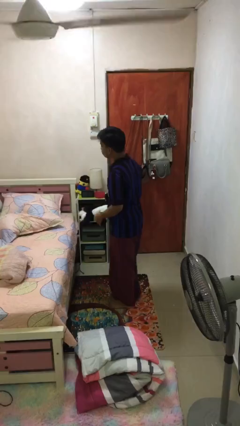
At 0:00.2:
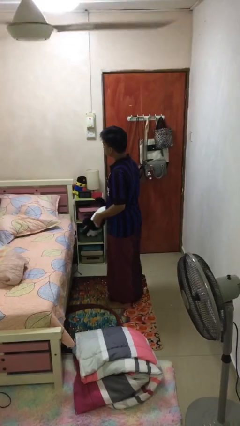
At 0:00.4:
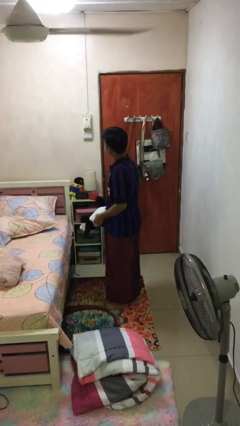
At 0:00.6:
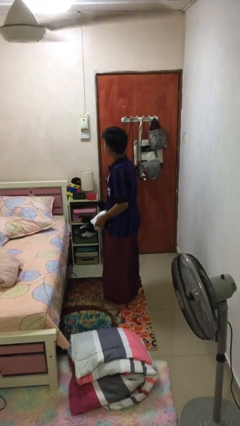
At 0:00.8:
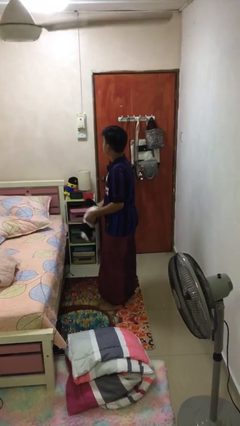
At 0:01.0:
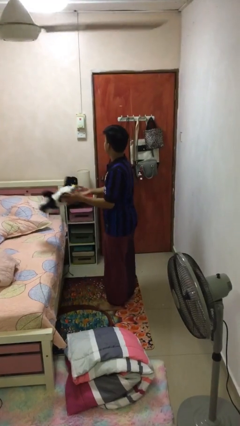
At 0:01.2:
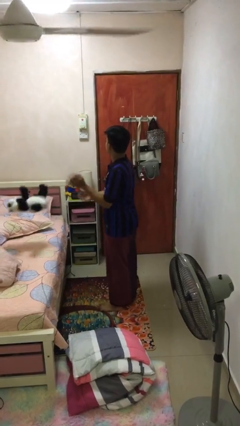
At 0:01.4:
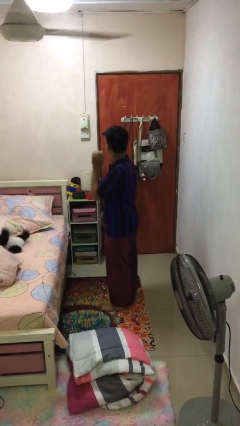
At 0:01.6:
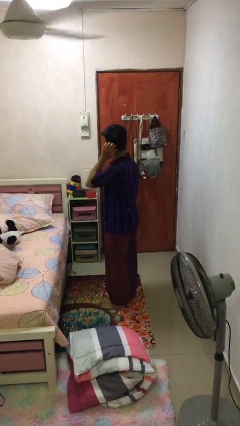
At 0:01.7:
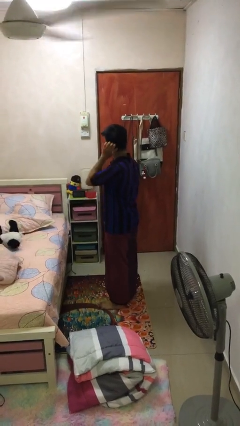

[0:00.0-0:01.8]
person throws object on bed

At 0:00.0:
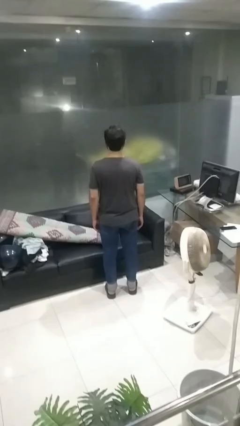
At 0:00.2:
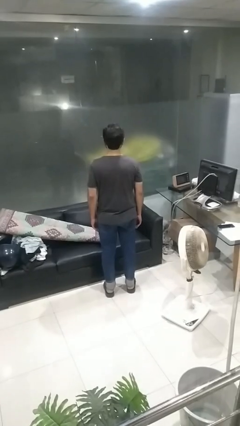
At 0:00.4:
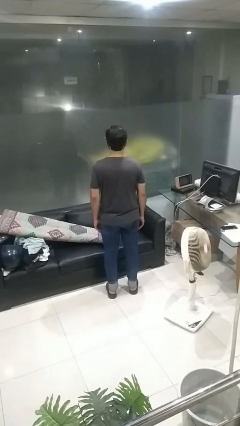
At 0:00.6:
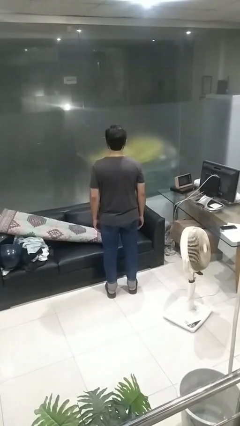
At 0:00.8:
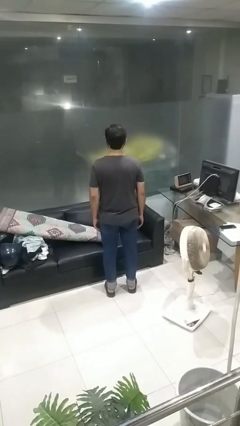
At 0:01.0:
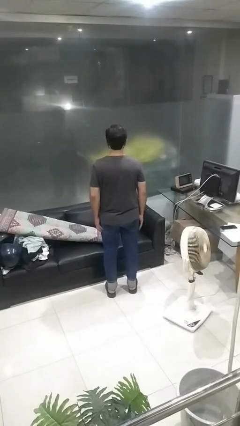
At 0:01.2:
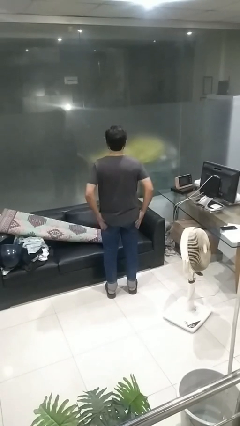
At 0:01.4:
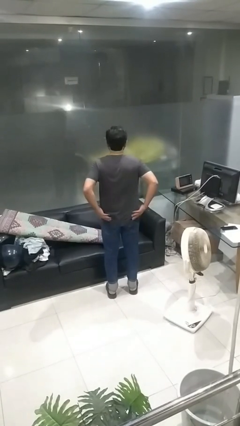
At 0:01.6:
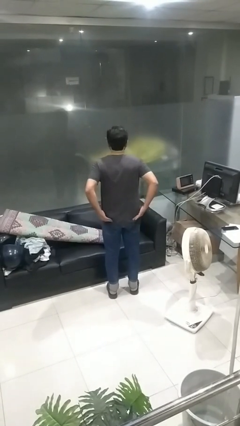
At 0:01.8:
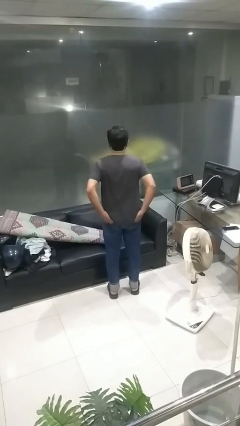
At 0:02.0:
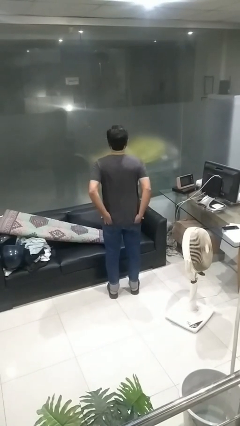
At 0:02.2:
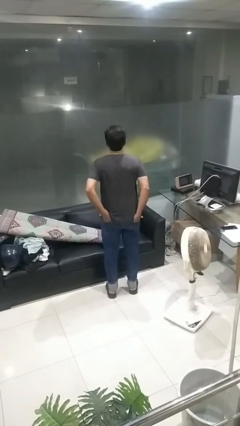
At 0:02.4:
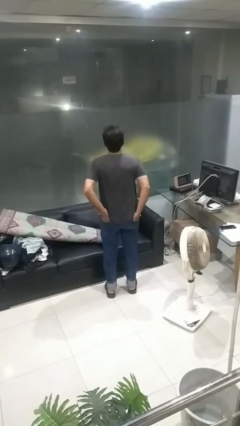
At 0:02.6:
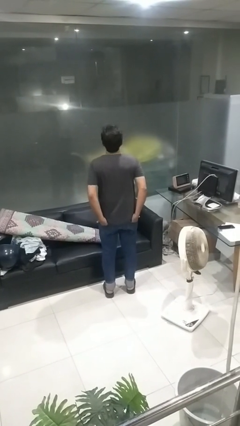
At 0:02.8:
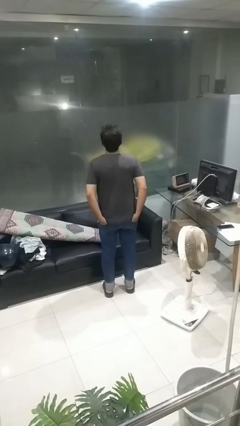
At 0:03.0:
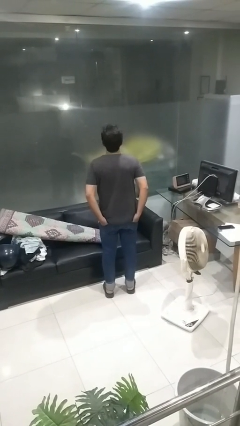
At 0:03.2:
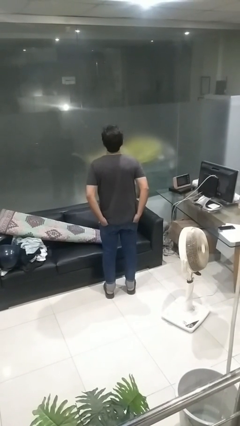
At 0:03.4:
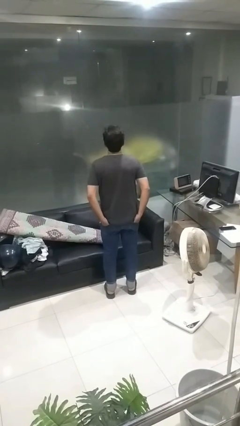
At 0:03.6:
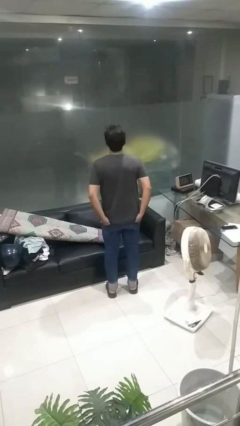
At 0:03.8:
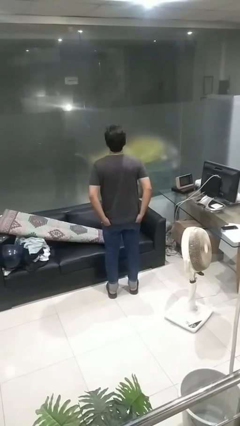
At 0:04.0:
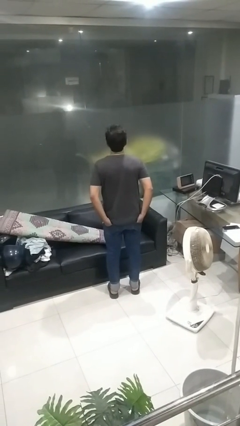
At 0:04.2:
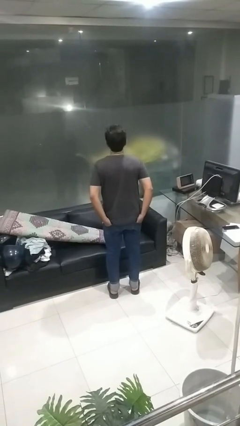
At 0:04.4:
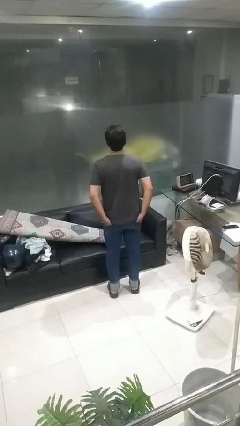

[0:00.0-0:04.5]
person puts hands in back pockets

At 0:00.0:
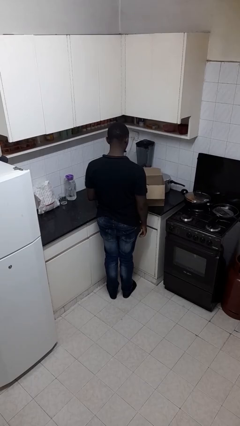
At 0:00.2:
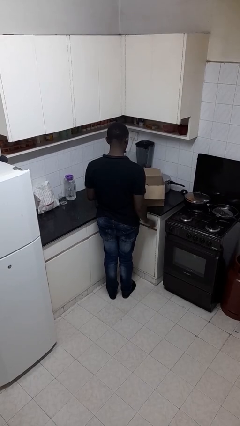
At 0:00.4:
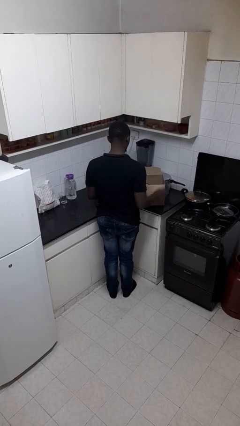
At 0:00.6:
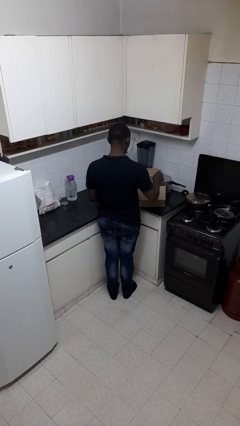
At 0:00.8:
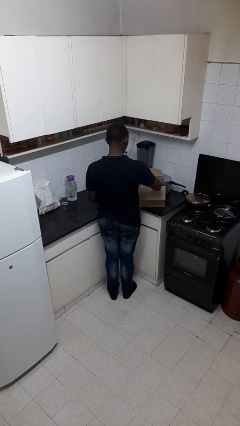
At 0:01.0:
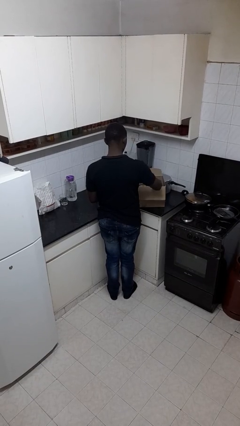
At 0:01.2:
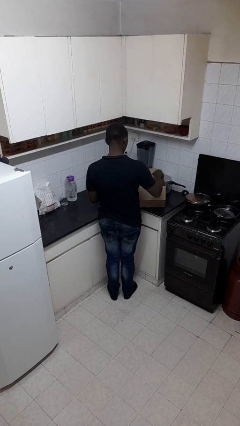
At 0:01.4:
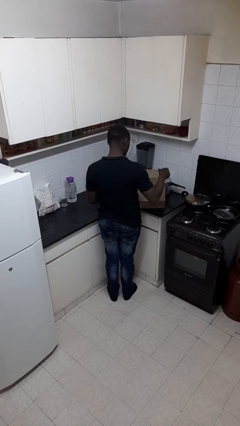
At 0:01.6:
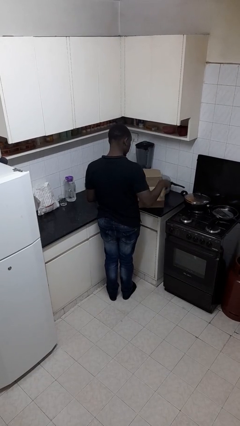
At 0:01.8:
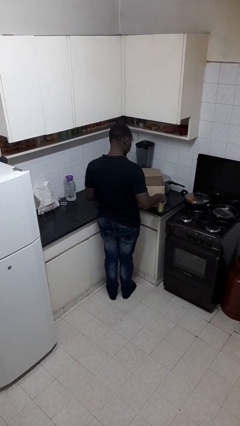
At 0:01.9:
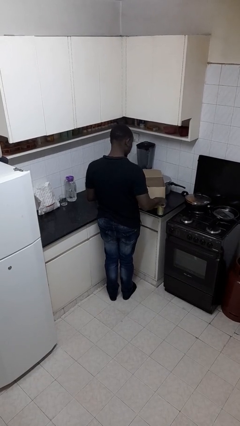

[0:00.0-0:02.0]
person takes object from box

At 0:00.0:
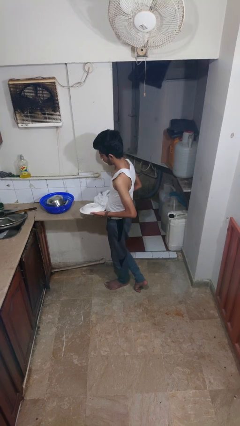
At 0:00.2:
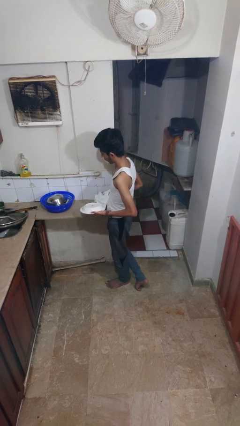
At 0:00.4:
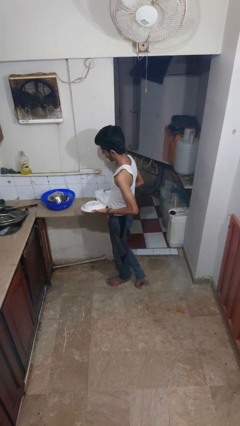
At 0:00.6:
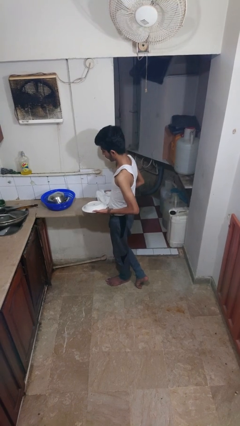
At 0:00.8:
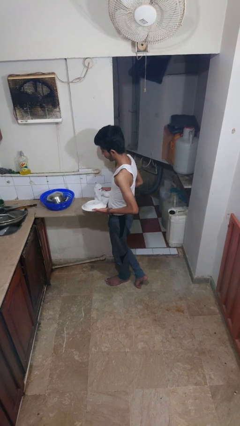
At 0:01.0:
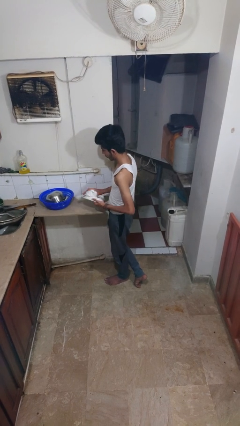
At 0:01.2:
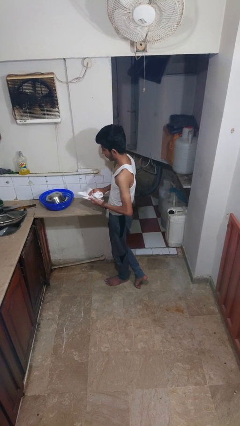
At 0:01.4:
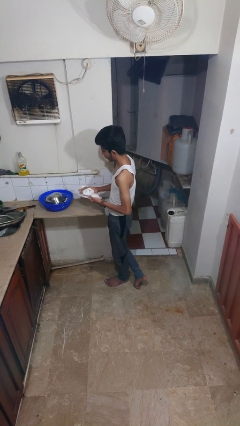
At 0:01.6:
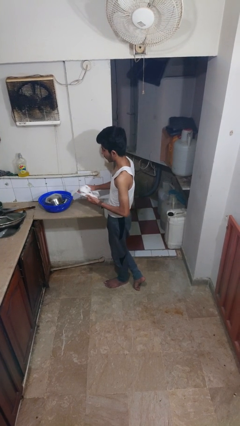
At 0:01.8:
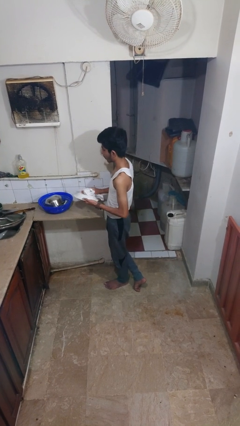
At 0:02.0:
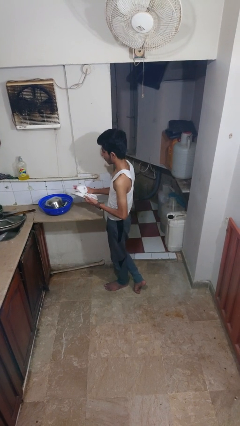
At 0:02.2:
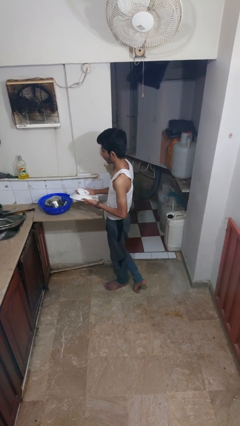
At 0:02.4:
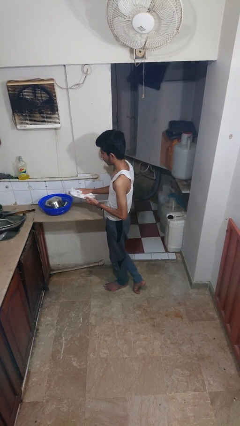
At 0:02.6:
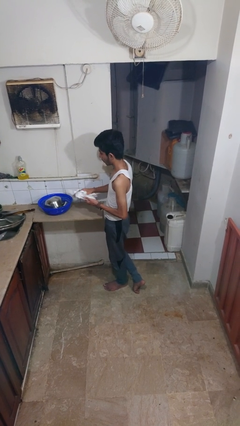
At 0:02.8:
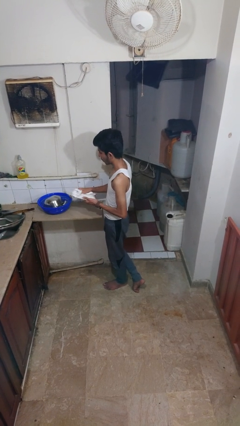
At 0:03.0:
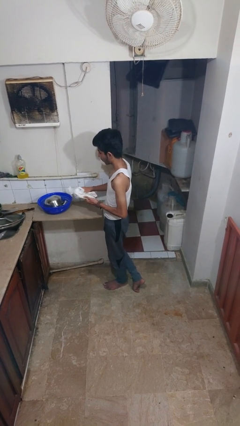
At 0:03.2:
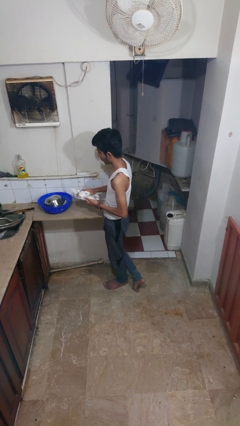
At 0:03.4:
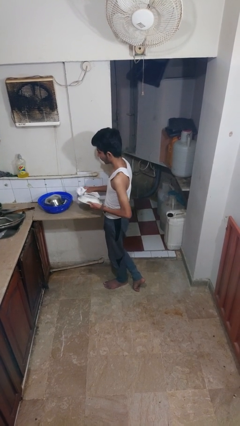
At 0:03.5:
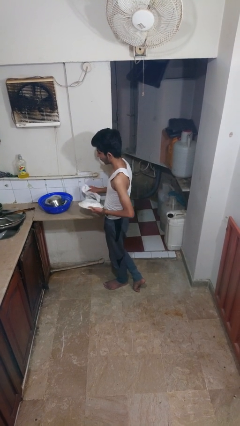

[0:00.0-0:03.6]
person dries dish

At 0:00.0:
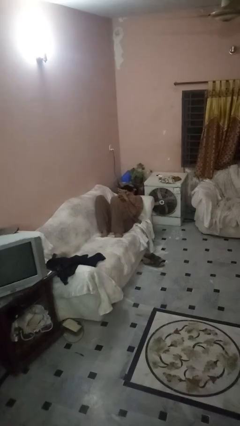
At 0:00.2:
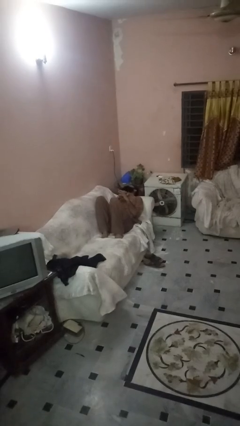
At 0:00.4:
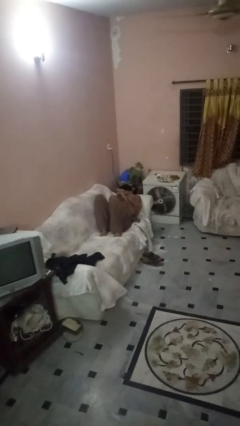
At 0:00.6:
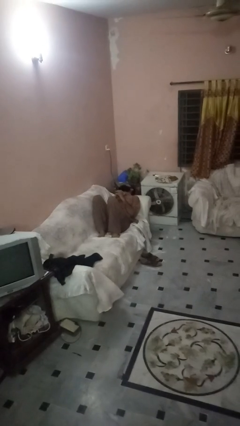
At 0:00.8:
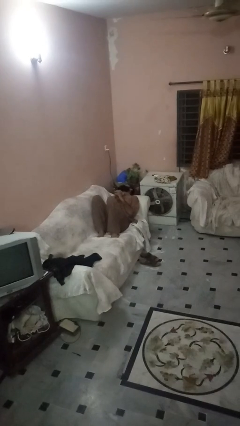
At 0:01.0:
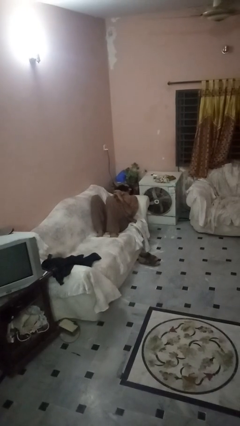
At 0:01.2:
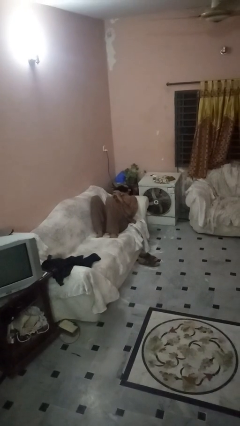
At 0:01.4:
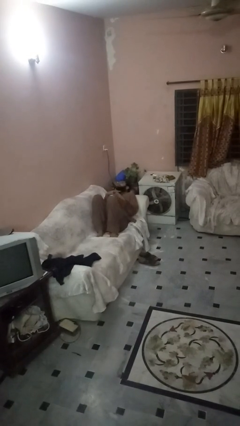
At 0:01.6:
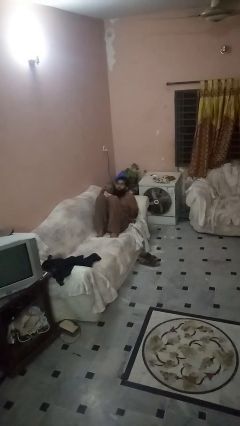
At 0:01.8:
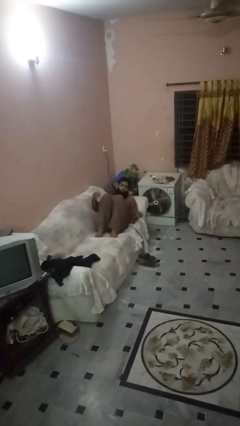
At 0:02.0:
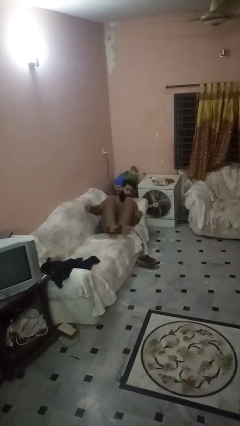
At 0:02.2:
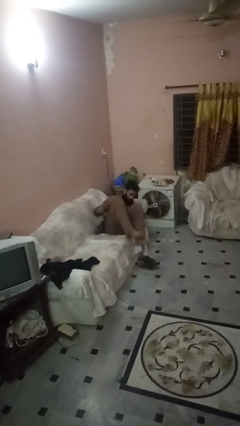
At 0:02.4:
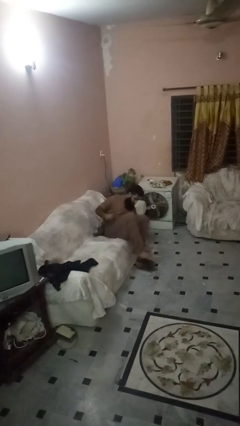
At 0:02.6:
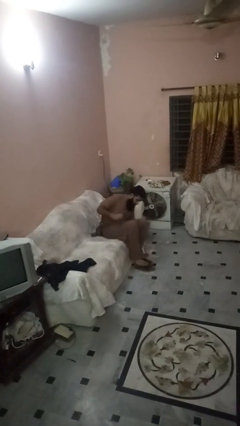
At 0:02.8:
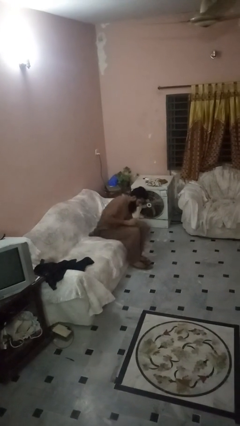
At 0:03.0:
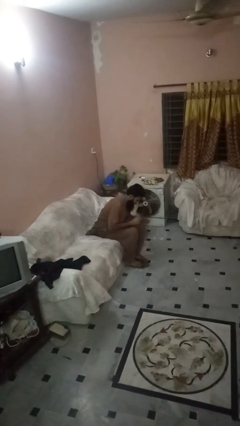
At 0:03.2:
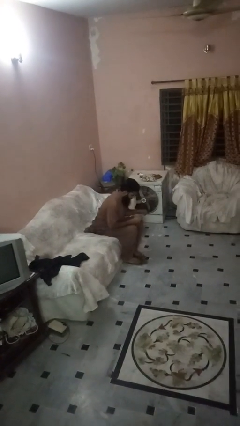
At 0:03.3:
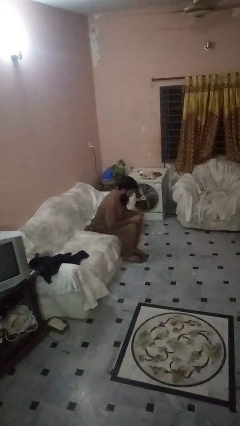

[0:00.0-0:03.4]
person stands up

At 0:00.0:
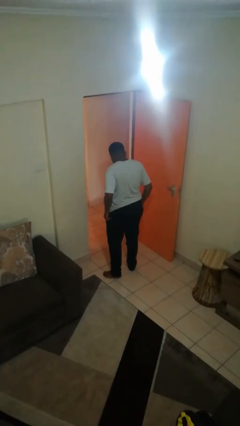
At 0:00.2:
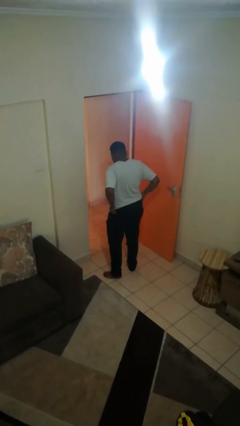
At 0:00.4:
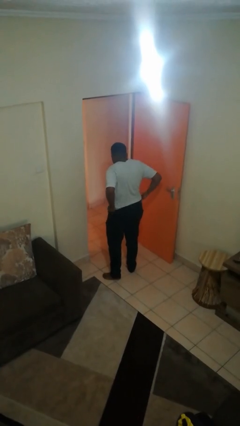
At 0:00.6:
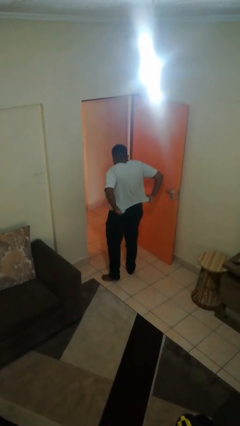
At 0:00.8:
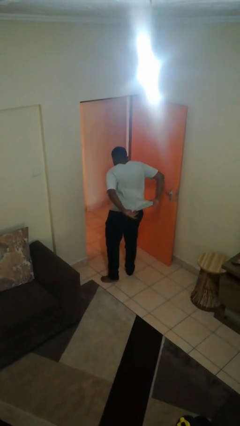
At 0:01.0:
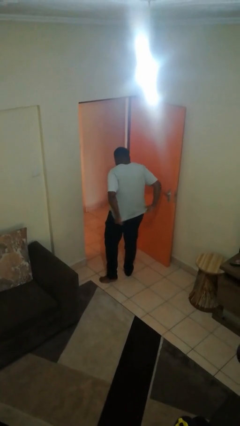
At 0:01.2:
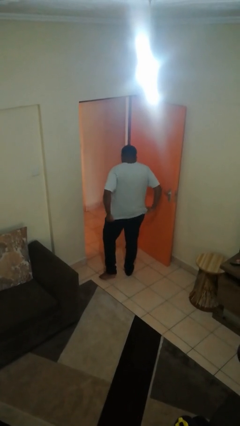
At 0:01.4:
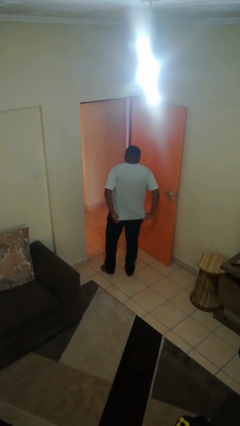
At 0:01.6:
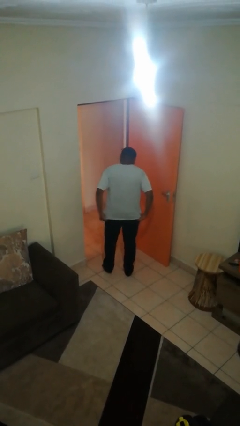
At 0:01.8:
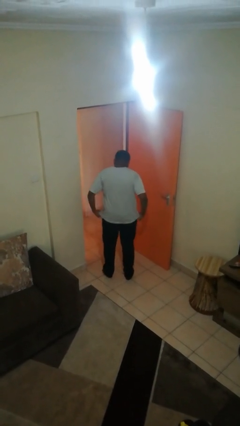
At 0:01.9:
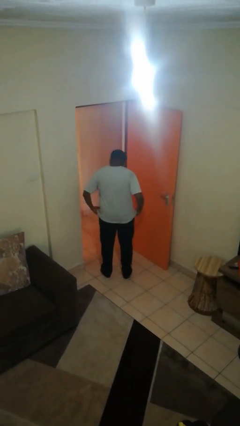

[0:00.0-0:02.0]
person untucks shirt
